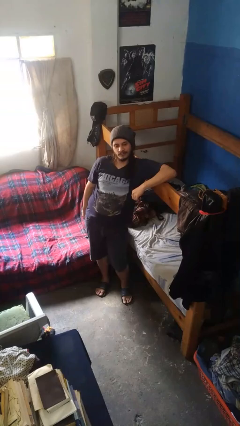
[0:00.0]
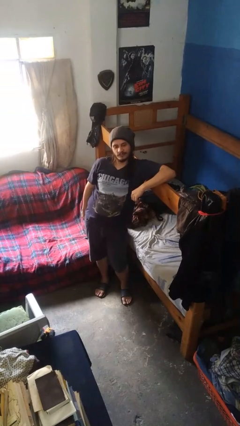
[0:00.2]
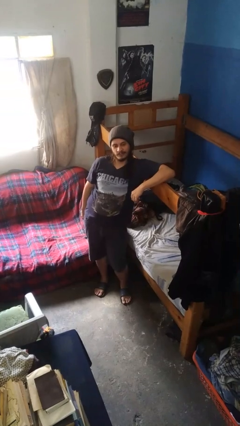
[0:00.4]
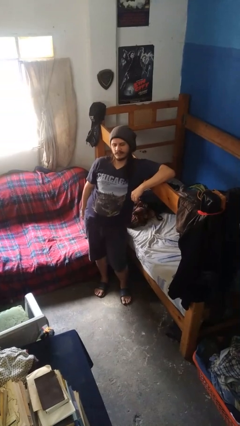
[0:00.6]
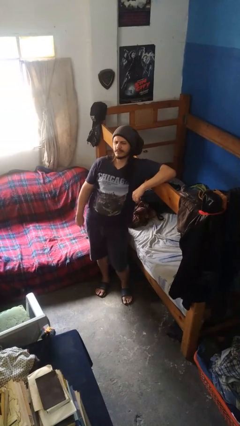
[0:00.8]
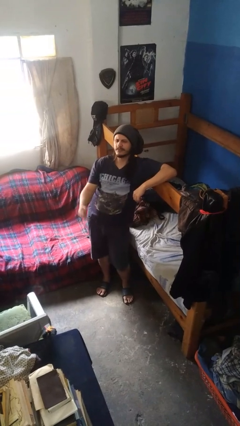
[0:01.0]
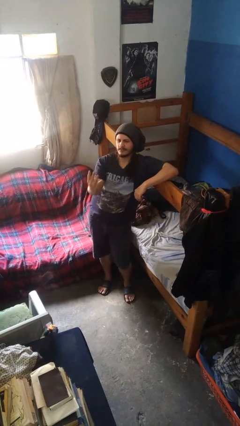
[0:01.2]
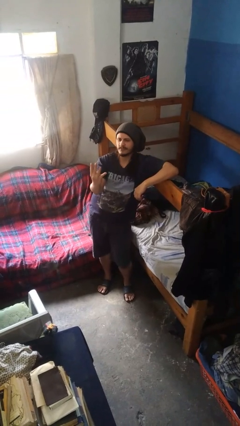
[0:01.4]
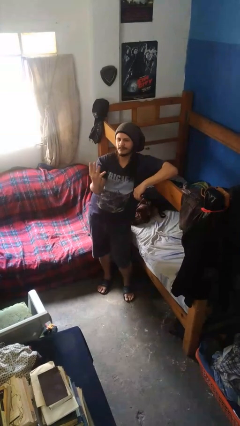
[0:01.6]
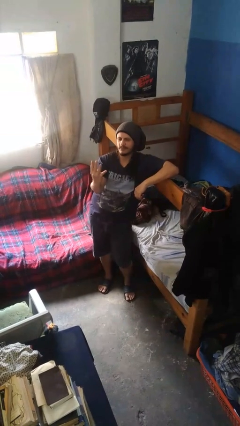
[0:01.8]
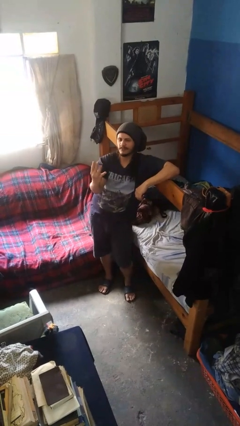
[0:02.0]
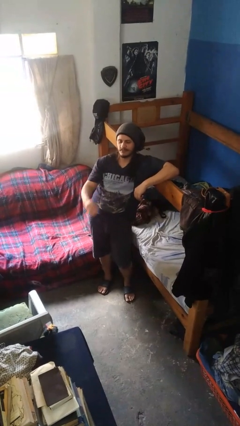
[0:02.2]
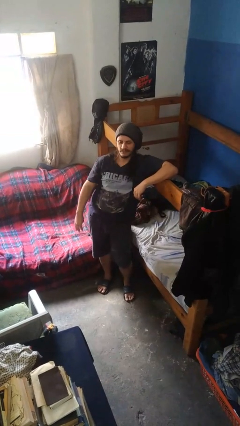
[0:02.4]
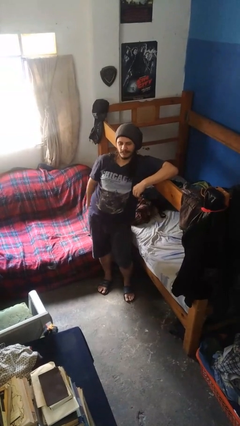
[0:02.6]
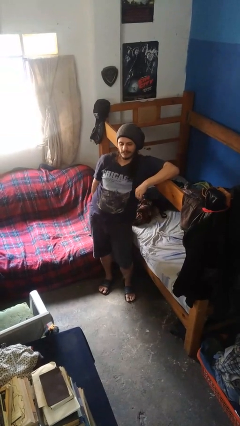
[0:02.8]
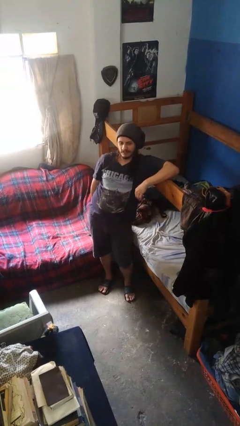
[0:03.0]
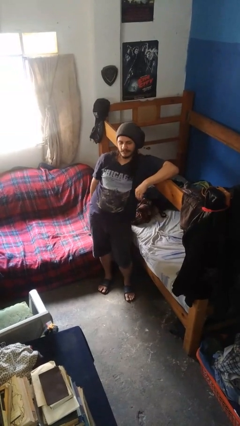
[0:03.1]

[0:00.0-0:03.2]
person gestures number four

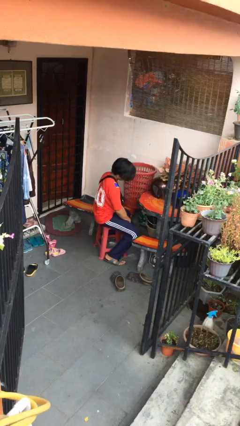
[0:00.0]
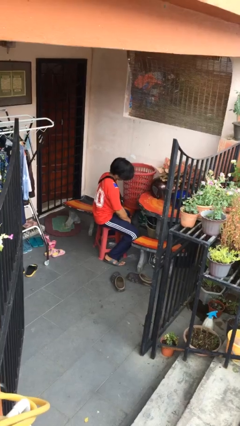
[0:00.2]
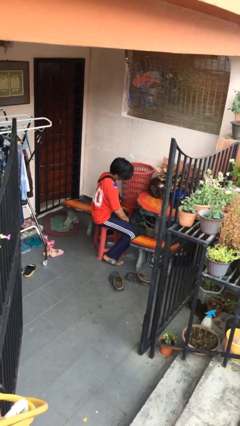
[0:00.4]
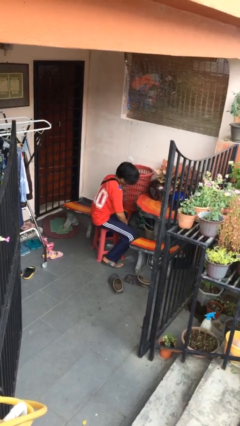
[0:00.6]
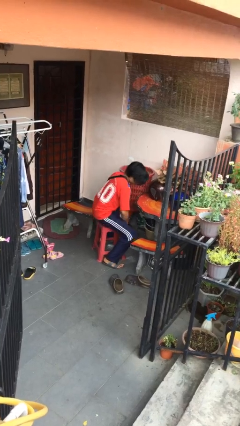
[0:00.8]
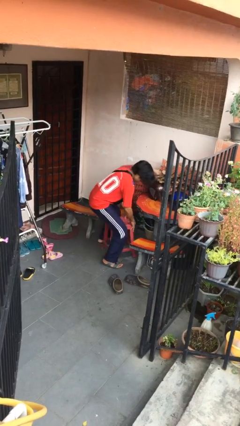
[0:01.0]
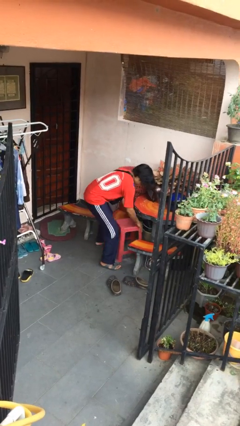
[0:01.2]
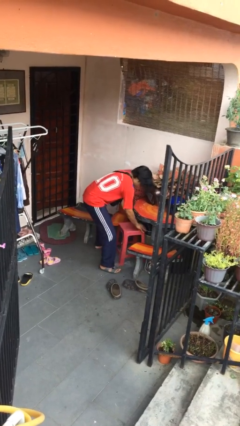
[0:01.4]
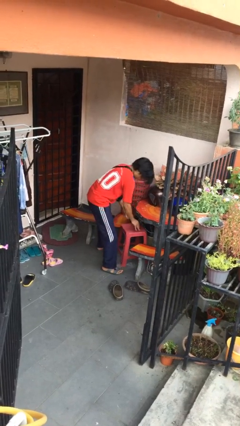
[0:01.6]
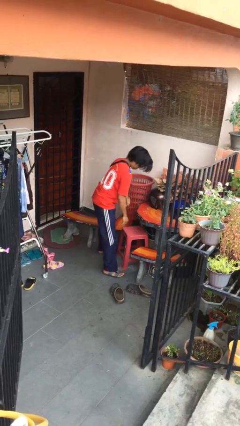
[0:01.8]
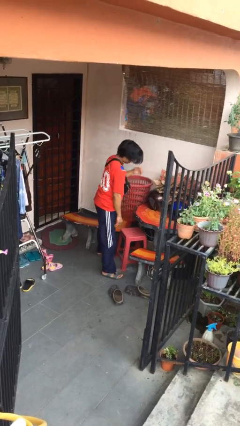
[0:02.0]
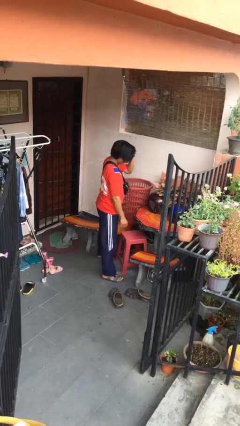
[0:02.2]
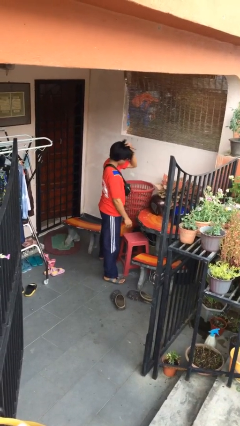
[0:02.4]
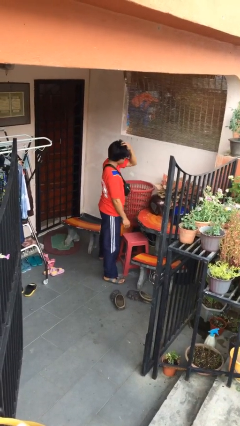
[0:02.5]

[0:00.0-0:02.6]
person stands up

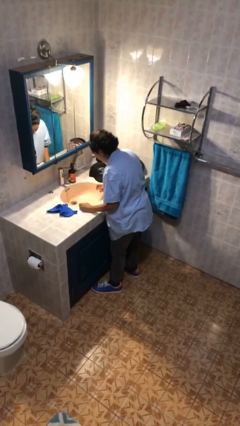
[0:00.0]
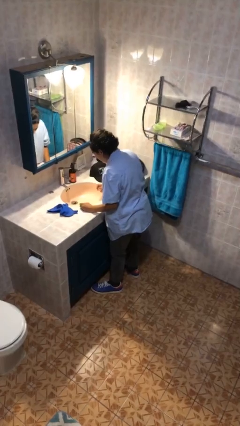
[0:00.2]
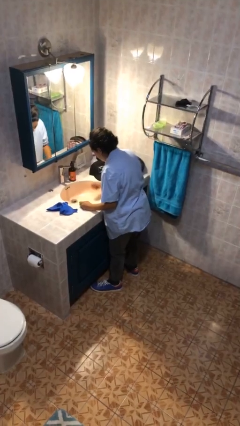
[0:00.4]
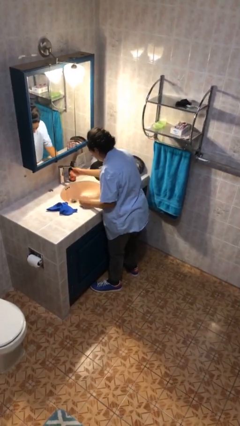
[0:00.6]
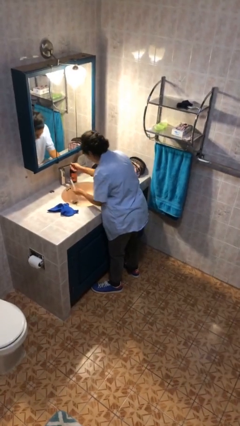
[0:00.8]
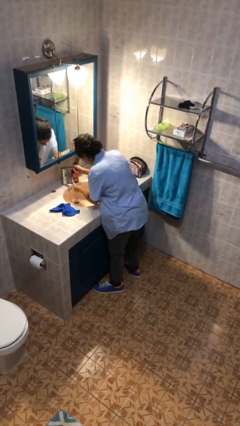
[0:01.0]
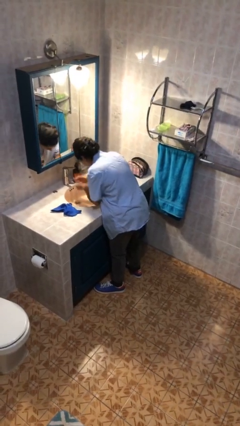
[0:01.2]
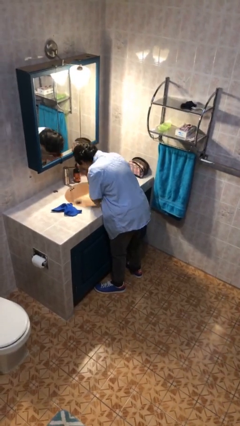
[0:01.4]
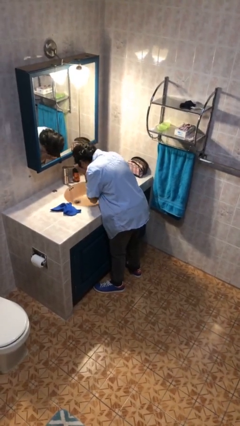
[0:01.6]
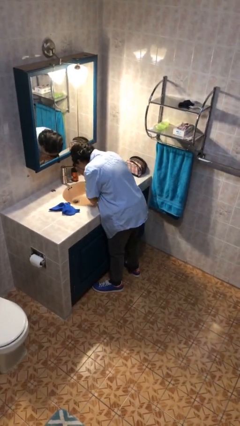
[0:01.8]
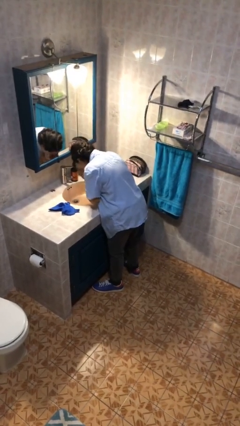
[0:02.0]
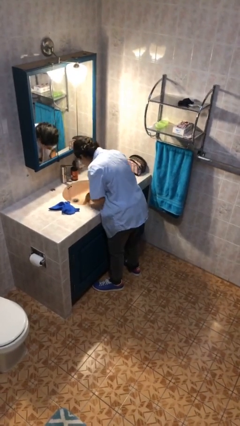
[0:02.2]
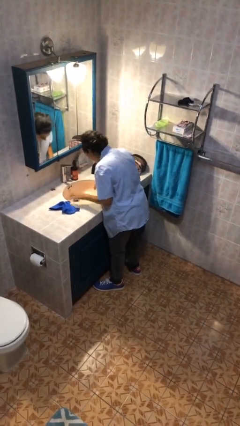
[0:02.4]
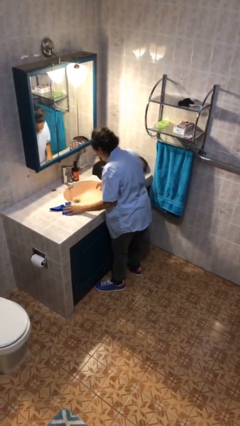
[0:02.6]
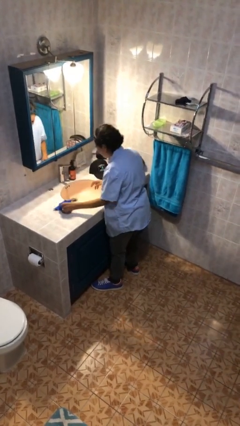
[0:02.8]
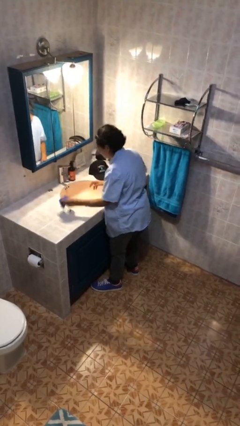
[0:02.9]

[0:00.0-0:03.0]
person washes face

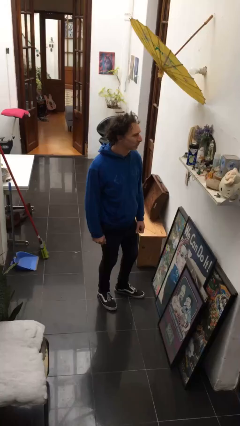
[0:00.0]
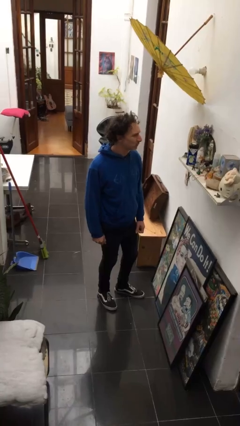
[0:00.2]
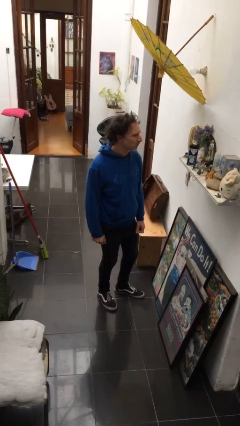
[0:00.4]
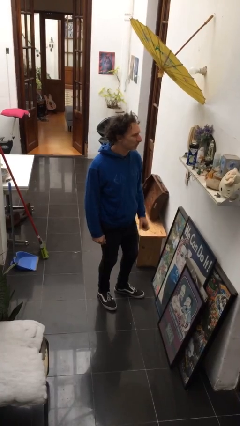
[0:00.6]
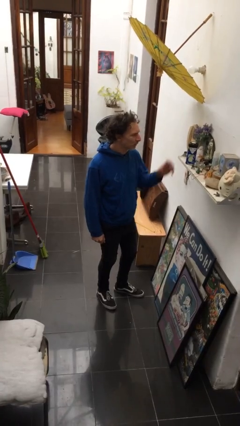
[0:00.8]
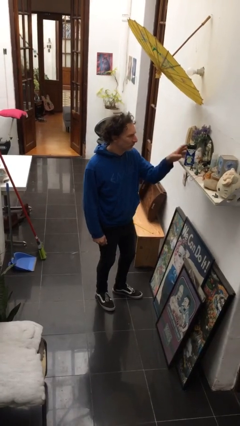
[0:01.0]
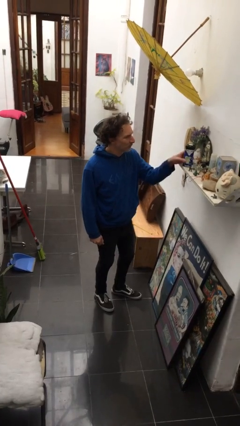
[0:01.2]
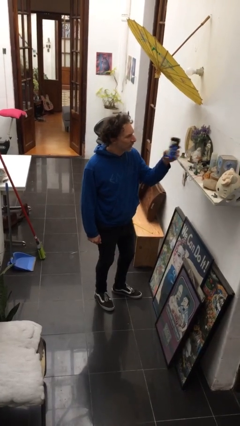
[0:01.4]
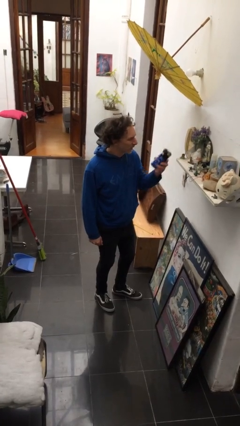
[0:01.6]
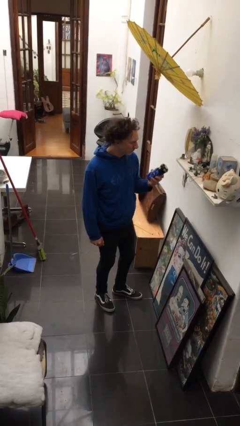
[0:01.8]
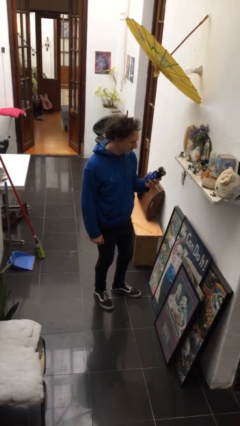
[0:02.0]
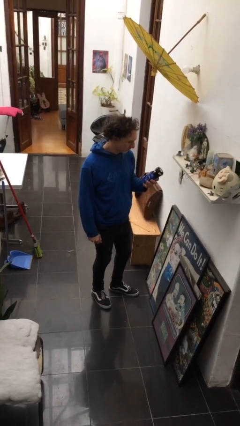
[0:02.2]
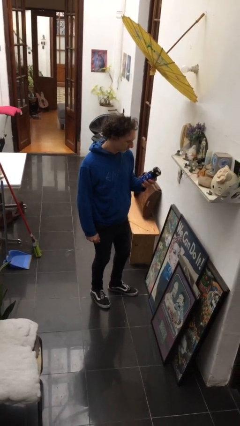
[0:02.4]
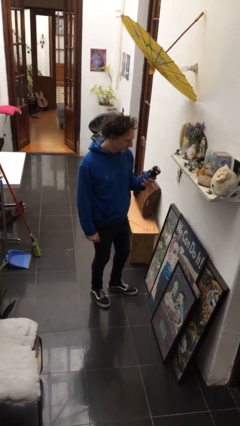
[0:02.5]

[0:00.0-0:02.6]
person picks up object from shelf

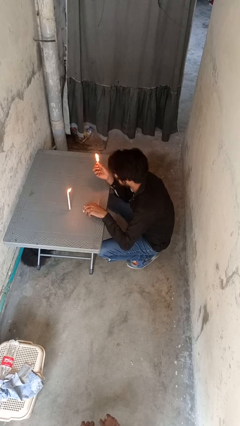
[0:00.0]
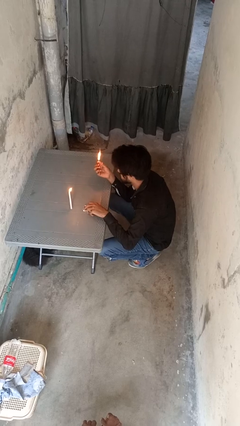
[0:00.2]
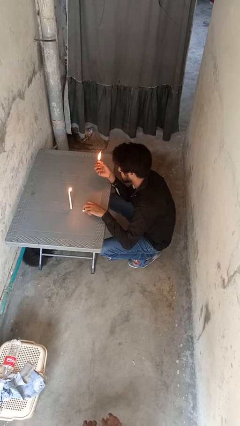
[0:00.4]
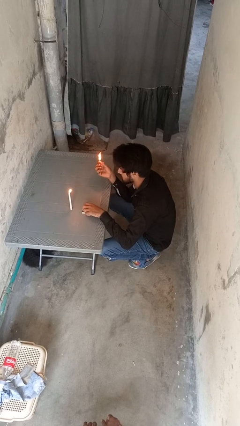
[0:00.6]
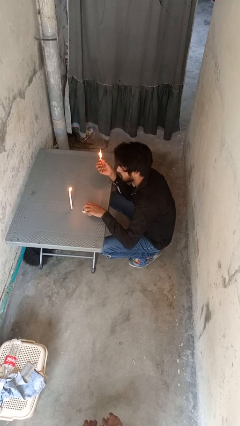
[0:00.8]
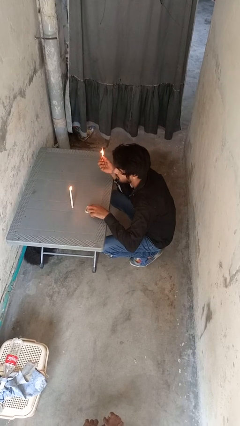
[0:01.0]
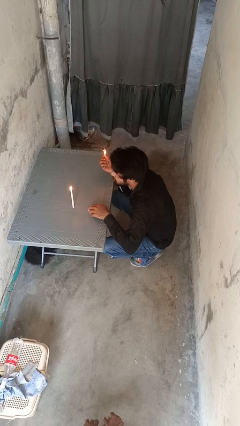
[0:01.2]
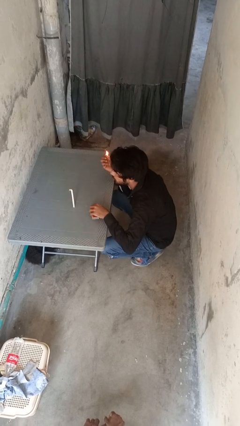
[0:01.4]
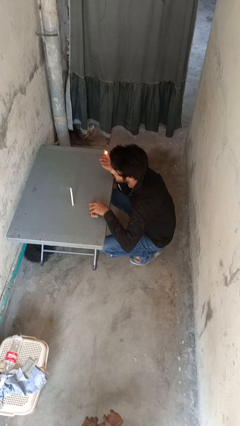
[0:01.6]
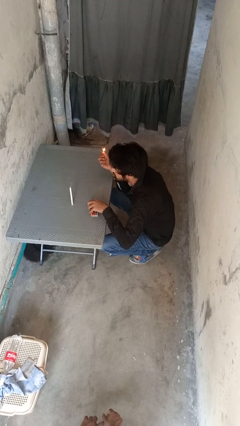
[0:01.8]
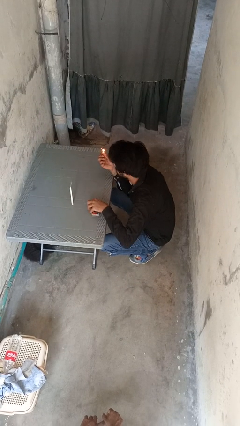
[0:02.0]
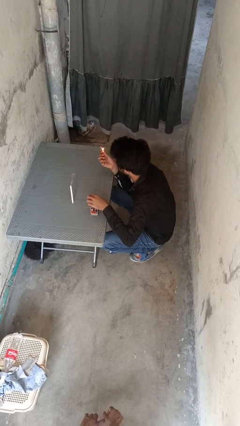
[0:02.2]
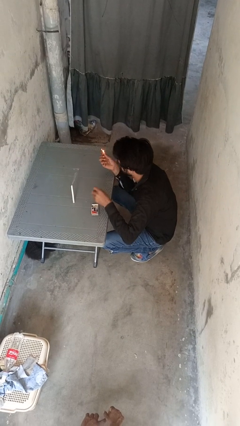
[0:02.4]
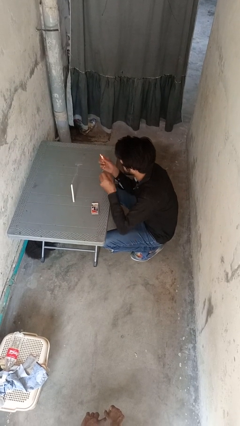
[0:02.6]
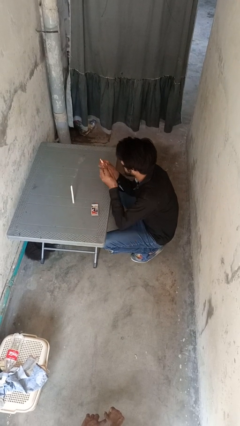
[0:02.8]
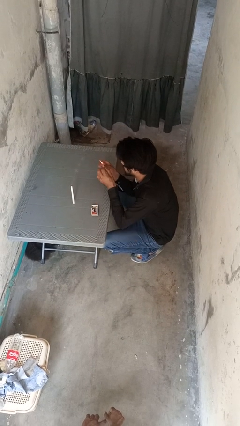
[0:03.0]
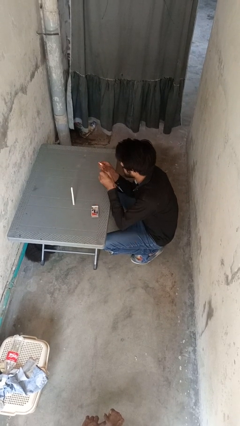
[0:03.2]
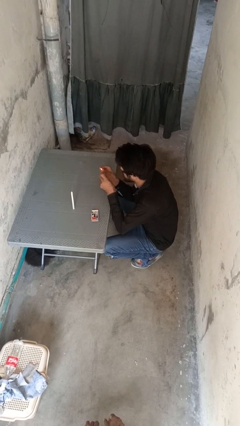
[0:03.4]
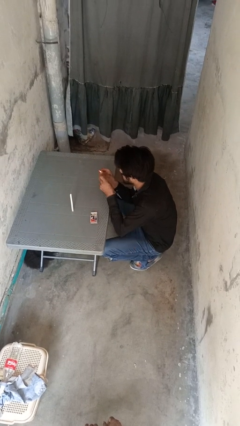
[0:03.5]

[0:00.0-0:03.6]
person extinguishes candle

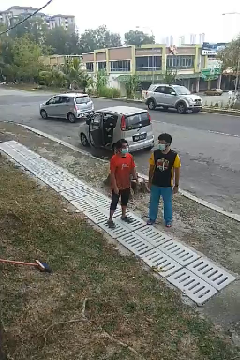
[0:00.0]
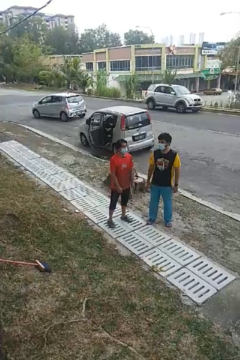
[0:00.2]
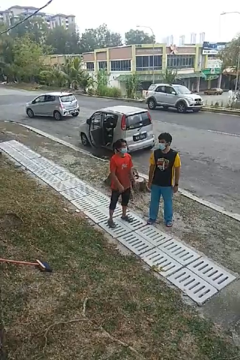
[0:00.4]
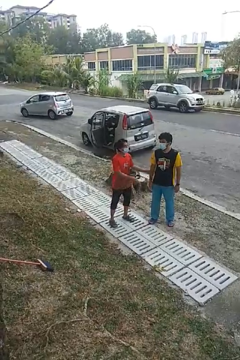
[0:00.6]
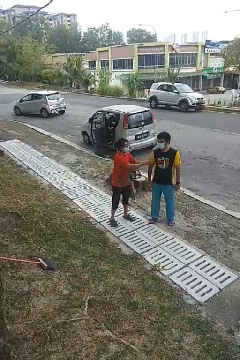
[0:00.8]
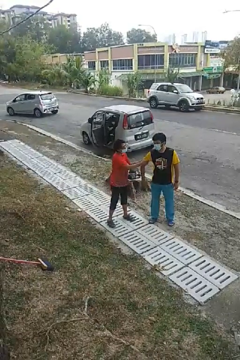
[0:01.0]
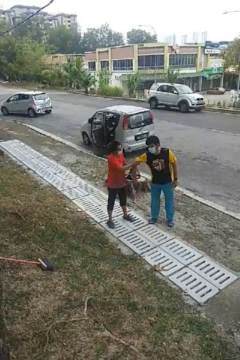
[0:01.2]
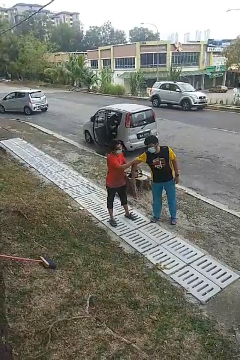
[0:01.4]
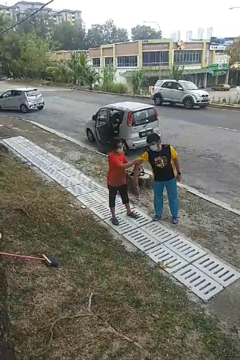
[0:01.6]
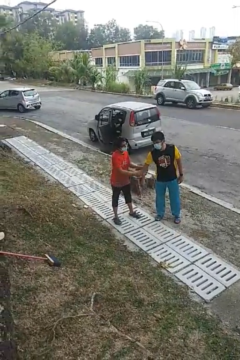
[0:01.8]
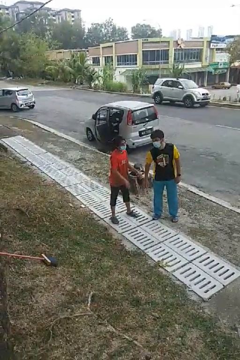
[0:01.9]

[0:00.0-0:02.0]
person grabs person by bicep

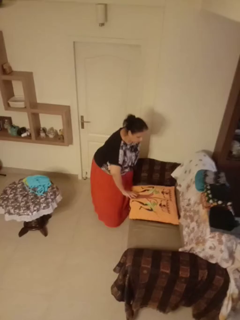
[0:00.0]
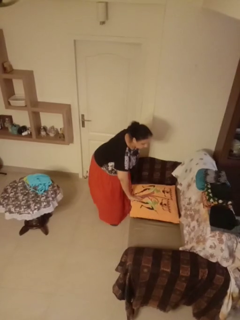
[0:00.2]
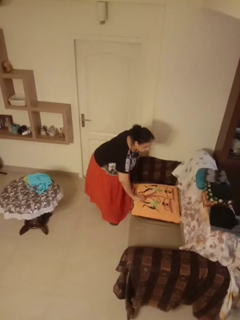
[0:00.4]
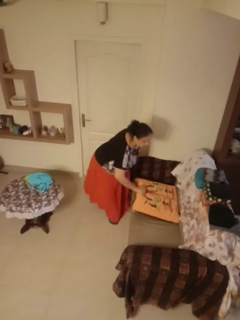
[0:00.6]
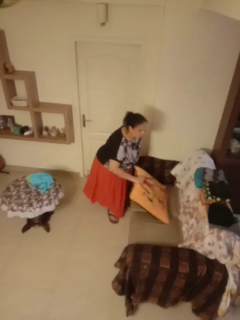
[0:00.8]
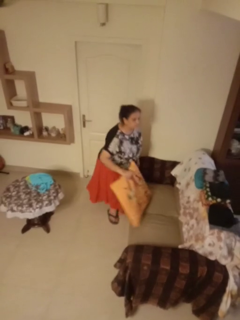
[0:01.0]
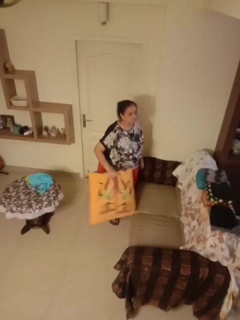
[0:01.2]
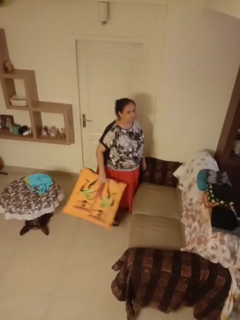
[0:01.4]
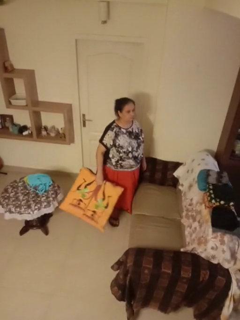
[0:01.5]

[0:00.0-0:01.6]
person picks up object from couch
